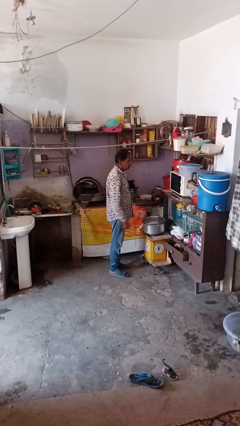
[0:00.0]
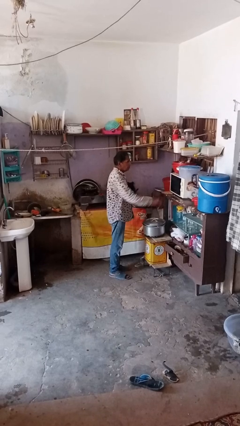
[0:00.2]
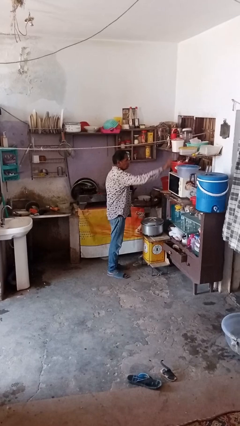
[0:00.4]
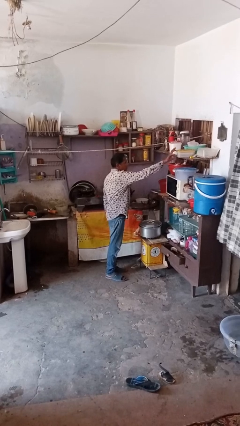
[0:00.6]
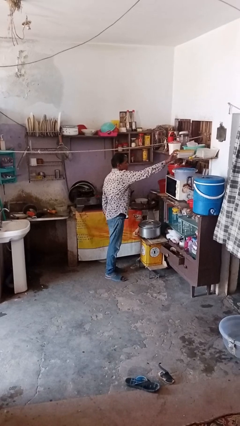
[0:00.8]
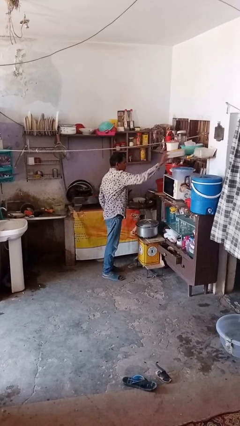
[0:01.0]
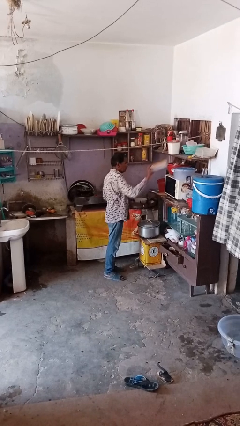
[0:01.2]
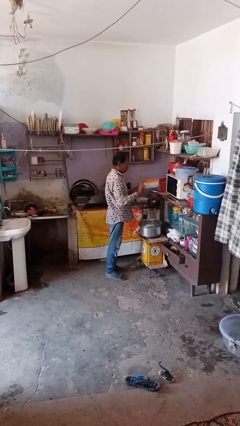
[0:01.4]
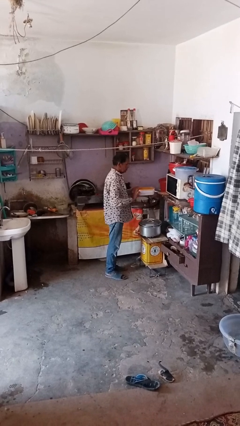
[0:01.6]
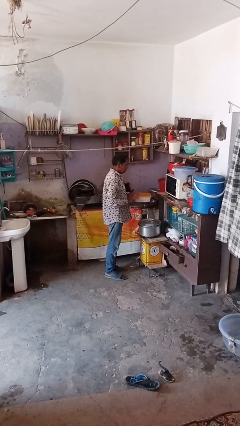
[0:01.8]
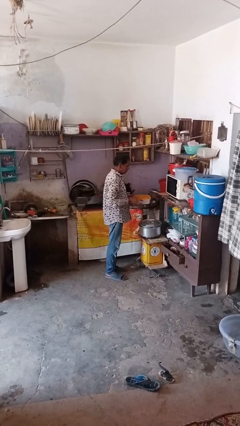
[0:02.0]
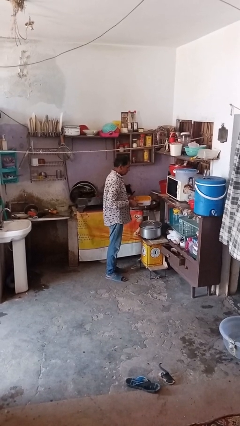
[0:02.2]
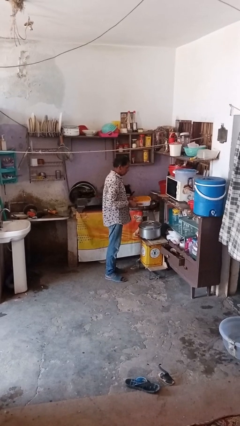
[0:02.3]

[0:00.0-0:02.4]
person picks up object from shelf

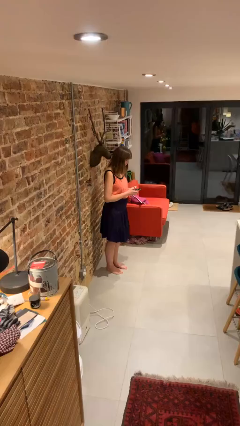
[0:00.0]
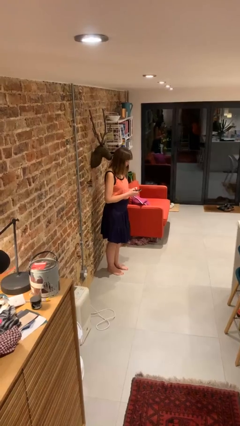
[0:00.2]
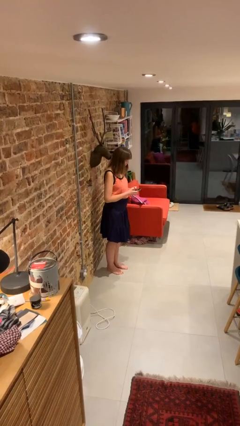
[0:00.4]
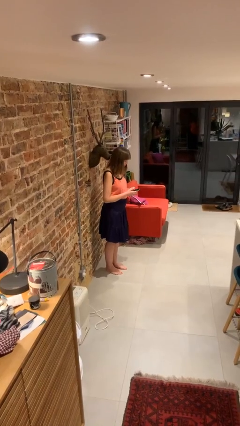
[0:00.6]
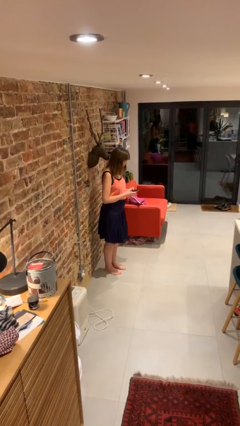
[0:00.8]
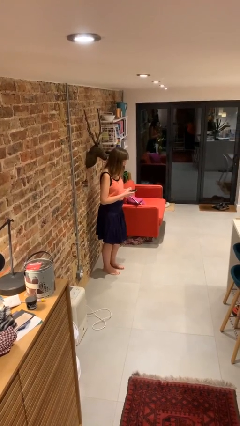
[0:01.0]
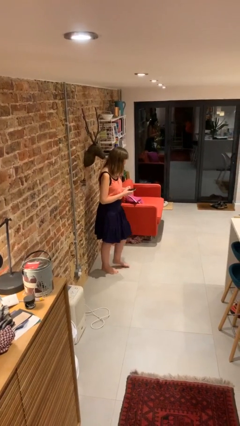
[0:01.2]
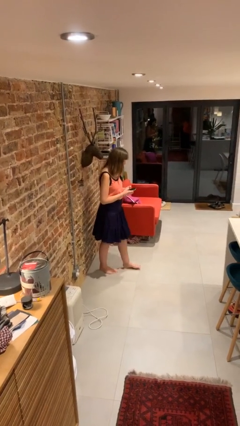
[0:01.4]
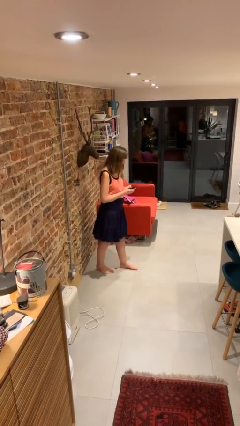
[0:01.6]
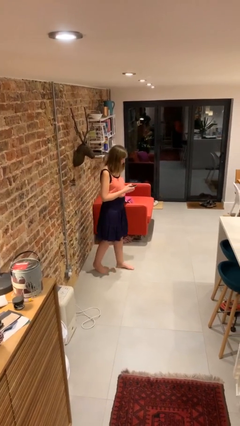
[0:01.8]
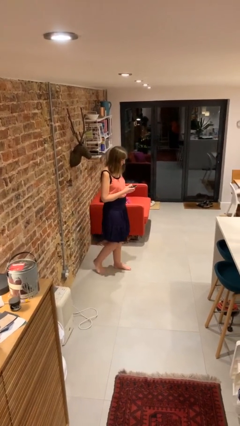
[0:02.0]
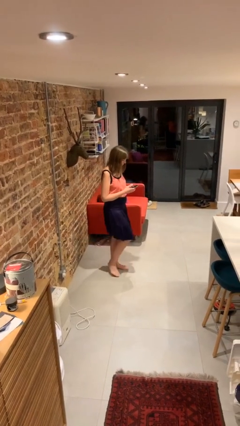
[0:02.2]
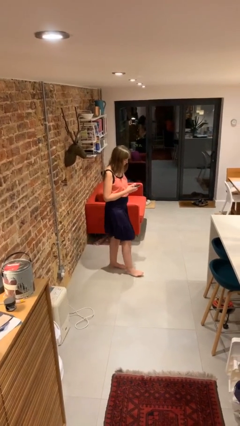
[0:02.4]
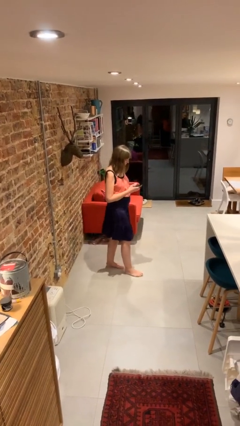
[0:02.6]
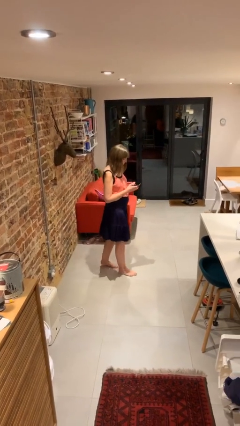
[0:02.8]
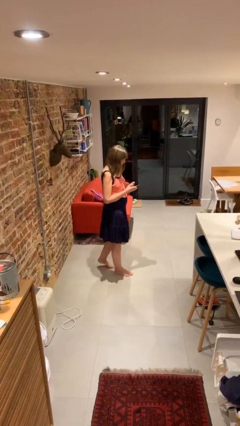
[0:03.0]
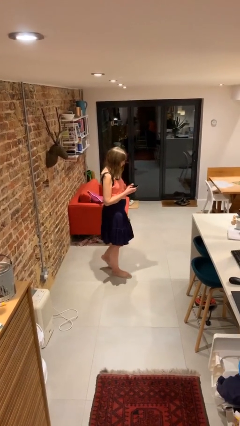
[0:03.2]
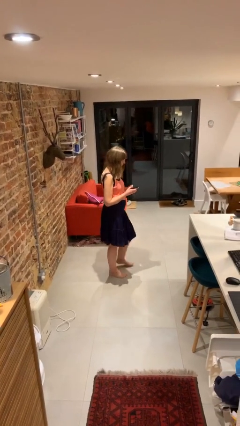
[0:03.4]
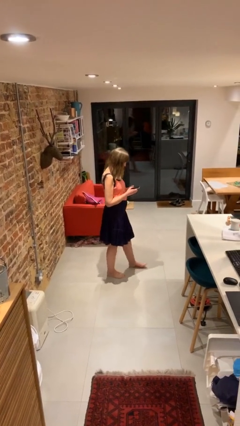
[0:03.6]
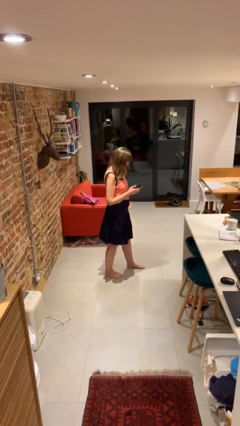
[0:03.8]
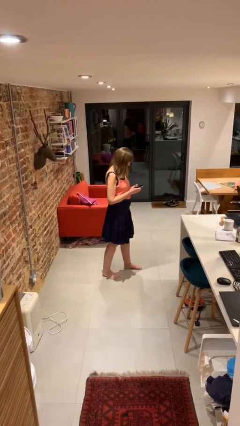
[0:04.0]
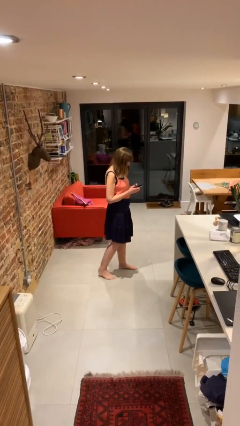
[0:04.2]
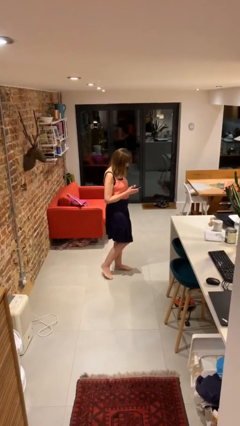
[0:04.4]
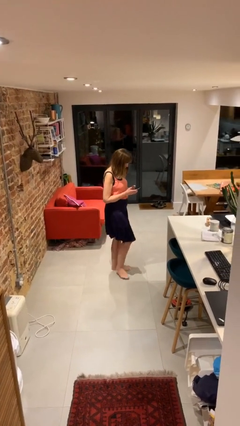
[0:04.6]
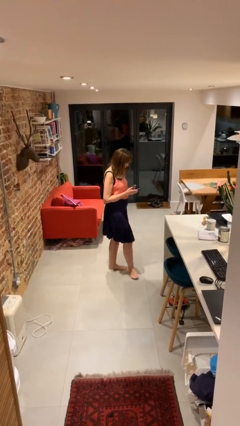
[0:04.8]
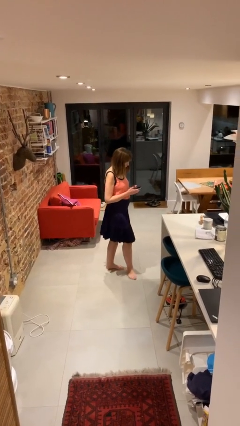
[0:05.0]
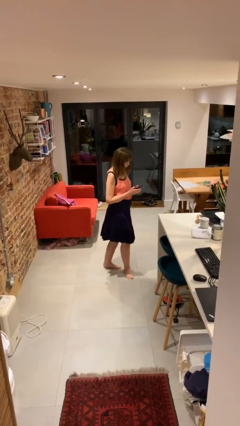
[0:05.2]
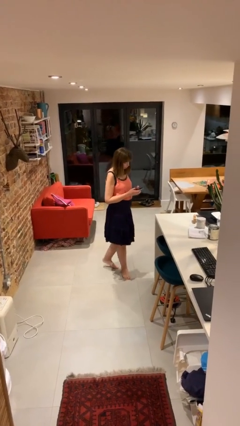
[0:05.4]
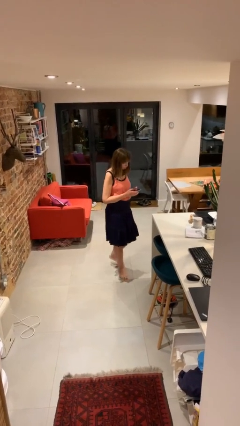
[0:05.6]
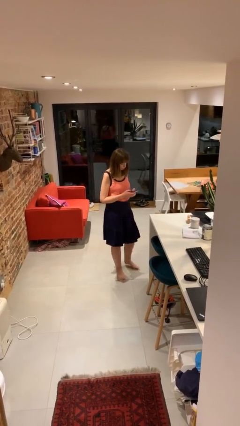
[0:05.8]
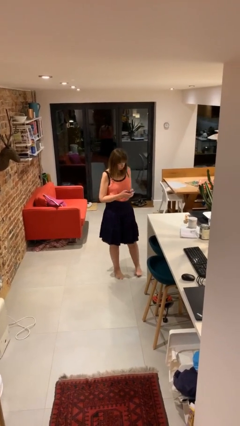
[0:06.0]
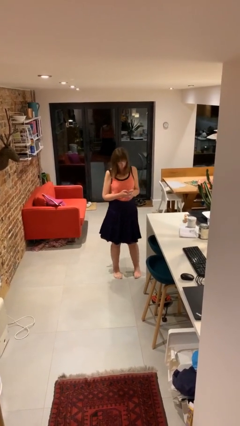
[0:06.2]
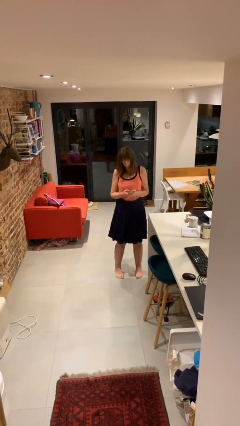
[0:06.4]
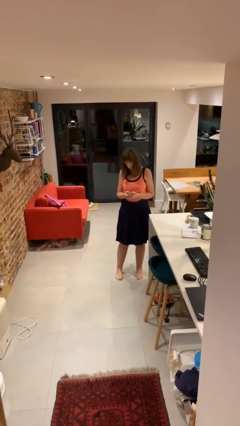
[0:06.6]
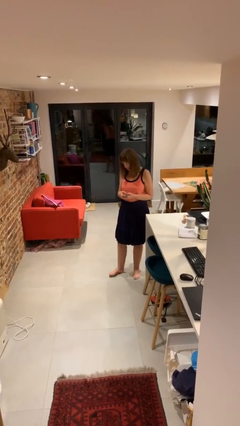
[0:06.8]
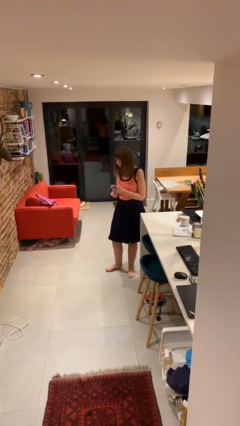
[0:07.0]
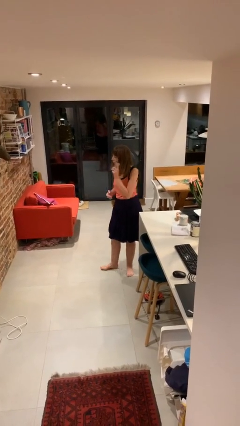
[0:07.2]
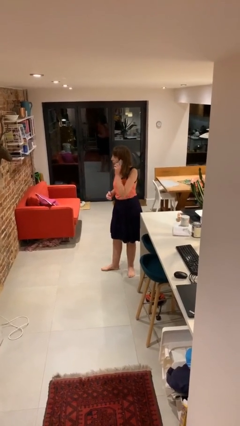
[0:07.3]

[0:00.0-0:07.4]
person texts on phone

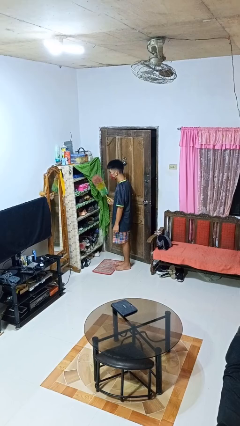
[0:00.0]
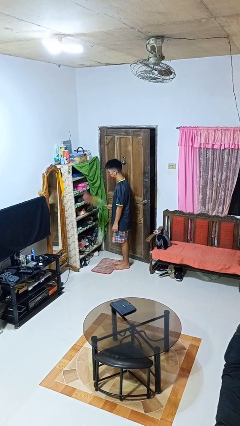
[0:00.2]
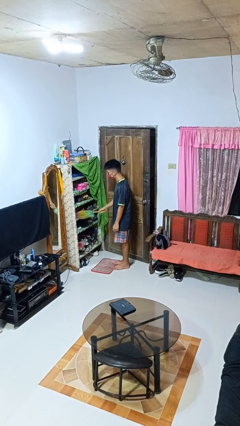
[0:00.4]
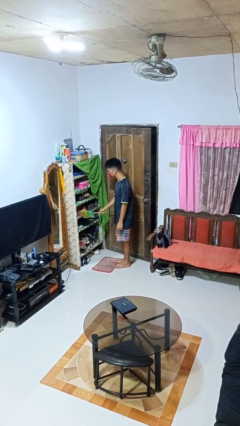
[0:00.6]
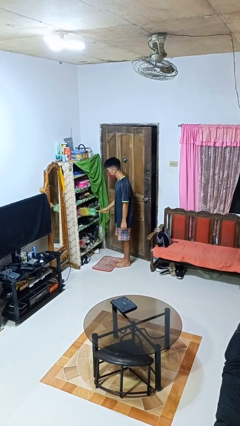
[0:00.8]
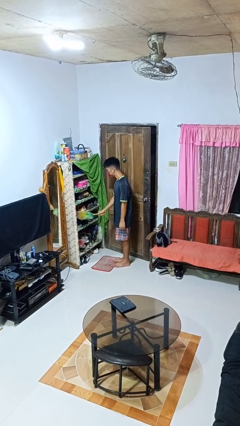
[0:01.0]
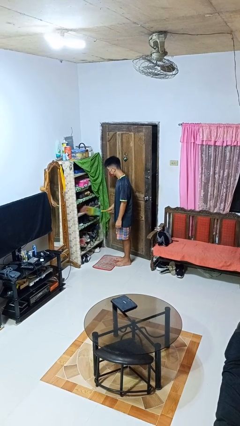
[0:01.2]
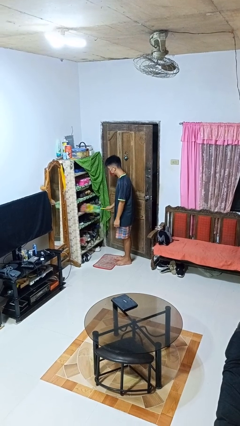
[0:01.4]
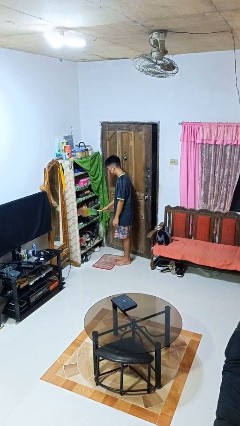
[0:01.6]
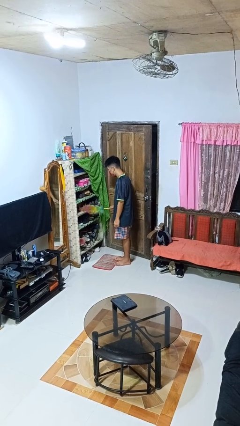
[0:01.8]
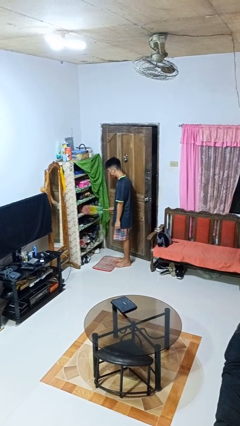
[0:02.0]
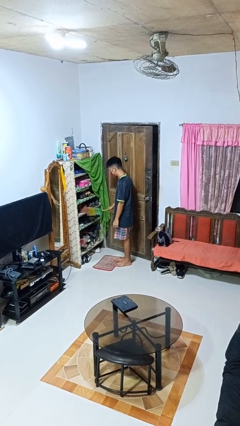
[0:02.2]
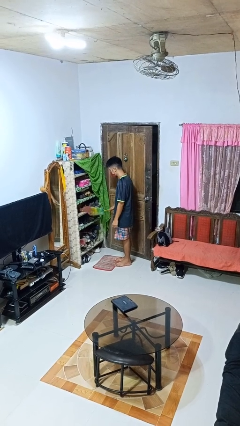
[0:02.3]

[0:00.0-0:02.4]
person dusts furniture

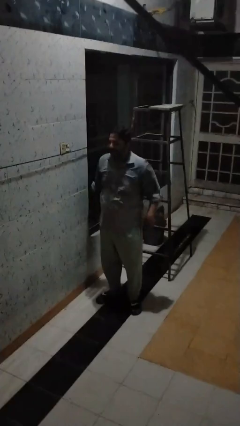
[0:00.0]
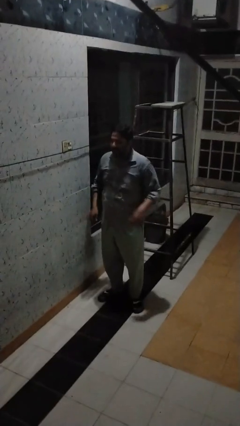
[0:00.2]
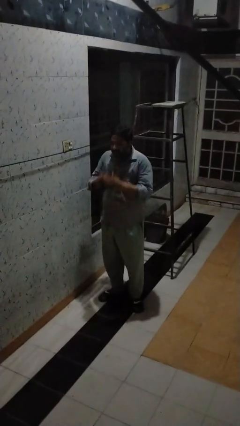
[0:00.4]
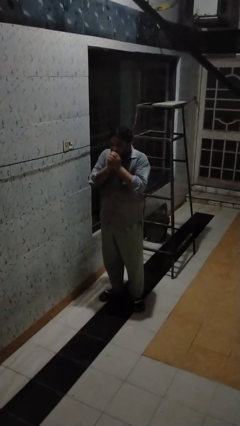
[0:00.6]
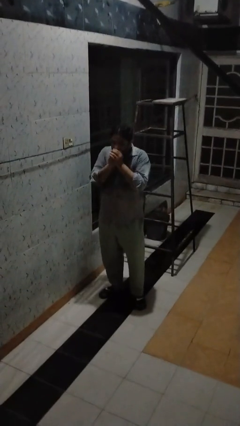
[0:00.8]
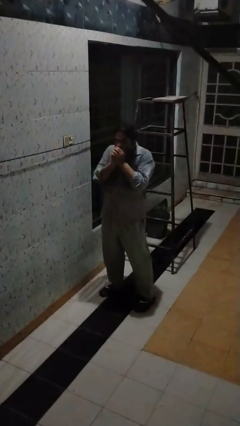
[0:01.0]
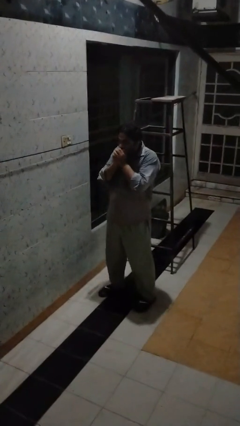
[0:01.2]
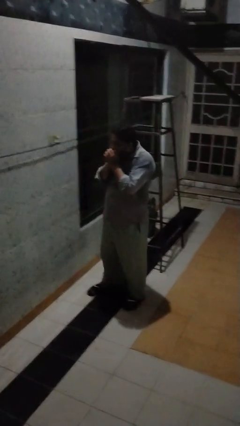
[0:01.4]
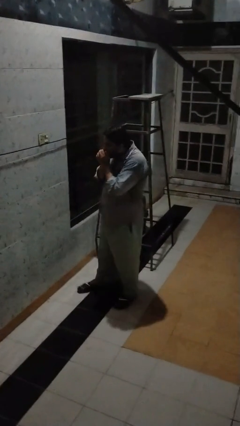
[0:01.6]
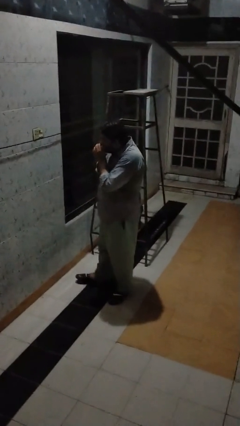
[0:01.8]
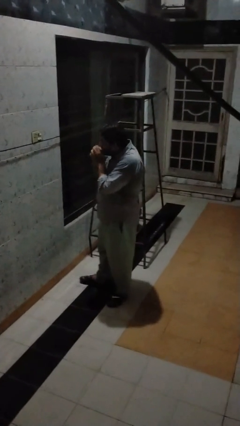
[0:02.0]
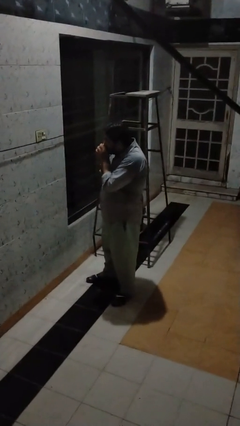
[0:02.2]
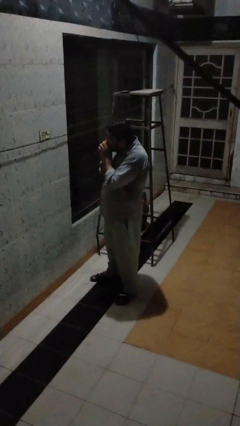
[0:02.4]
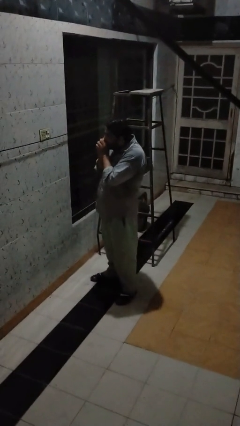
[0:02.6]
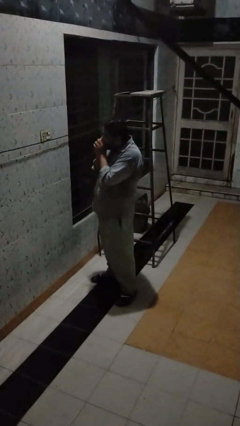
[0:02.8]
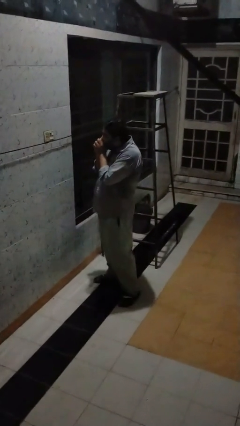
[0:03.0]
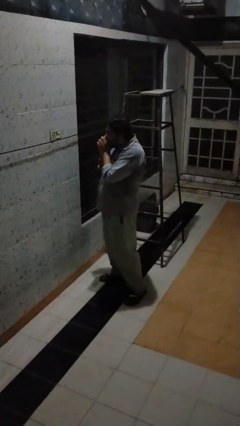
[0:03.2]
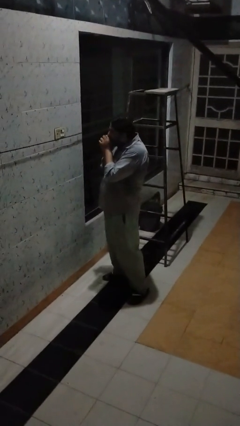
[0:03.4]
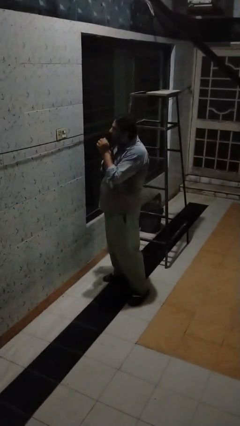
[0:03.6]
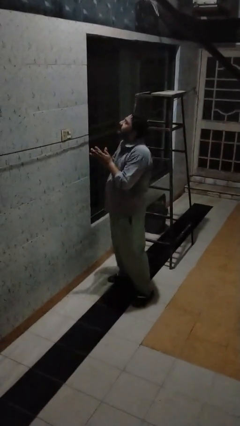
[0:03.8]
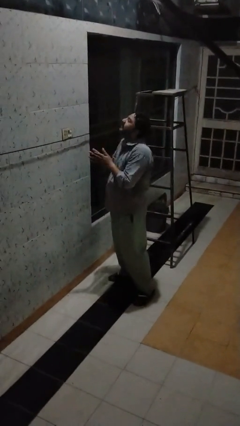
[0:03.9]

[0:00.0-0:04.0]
person blows into hands

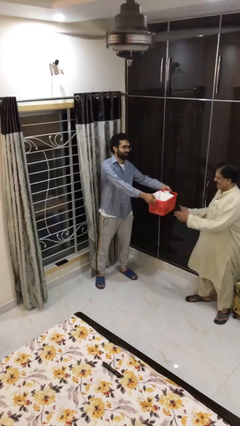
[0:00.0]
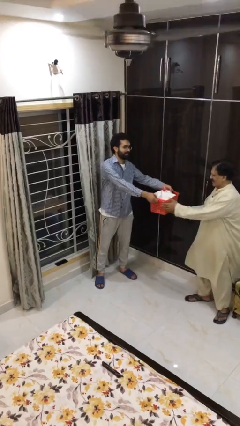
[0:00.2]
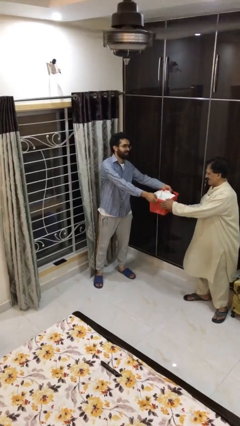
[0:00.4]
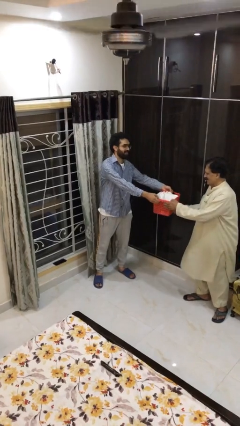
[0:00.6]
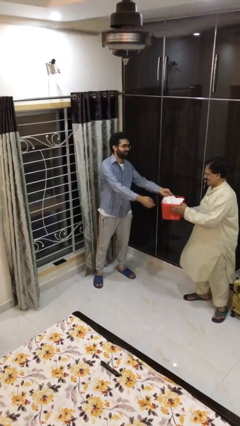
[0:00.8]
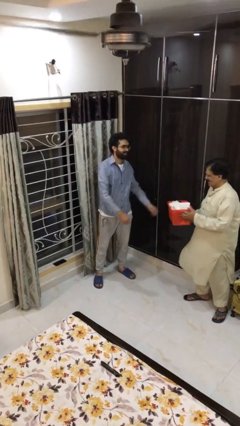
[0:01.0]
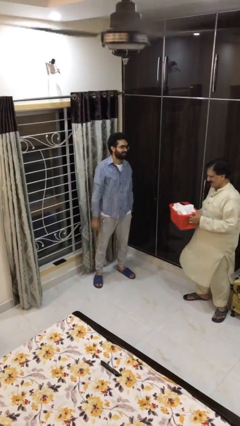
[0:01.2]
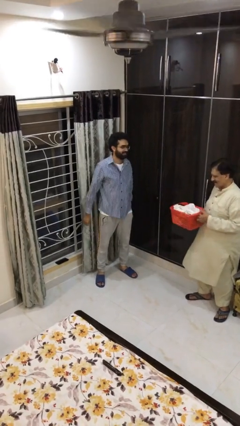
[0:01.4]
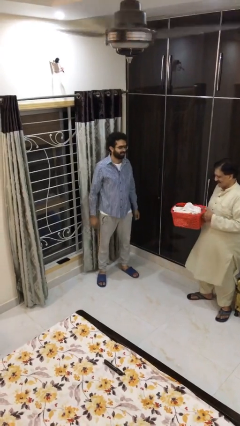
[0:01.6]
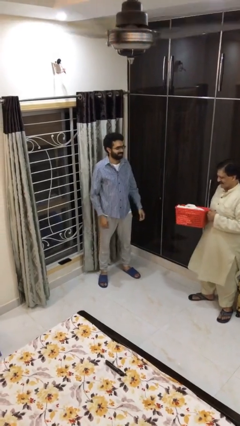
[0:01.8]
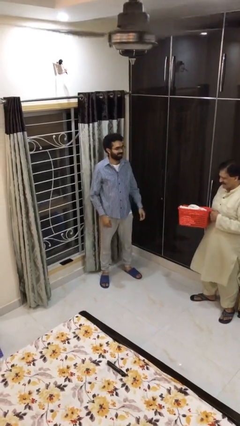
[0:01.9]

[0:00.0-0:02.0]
person transfers object to person
